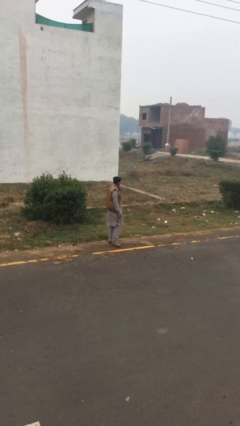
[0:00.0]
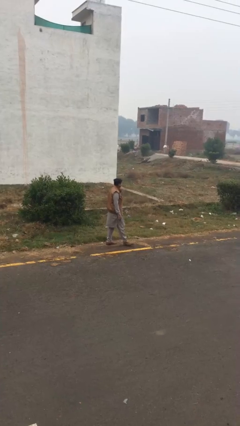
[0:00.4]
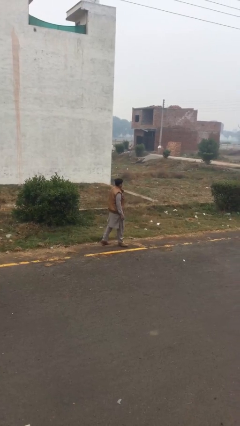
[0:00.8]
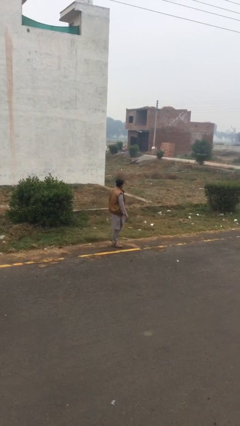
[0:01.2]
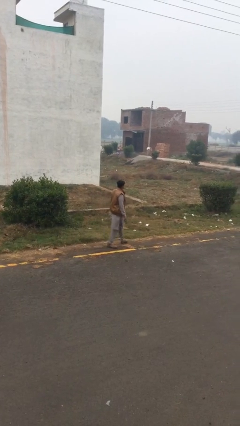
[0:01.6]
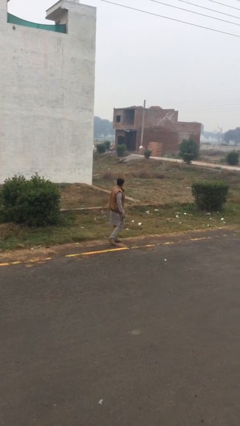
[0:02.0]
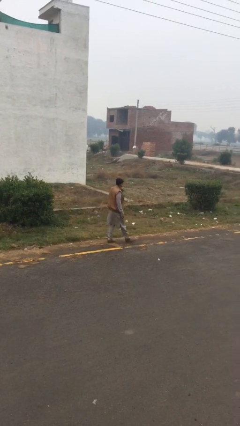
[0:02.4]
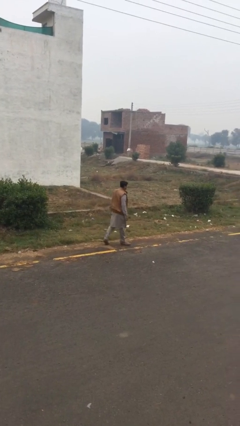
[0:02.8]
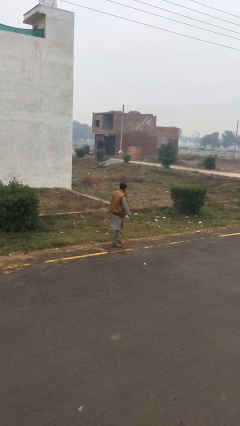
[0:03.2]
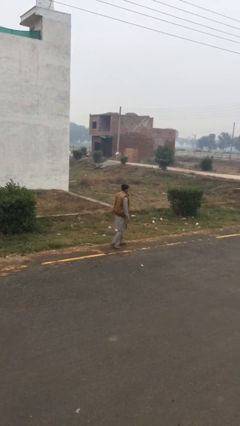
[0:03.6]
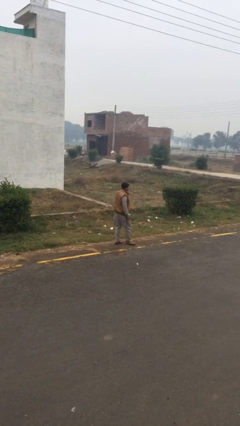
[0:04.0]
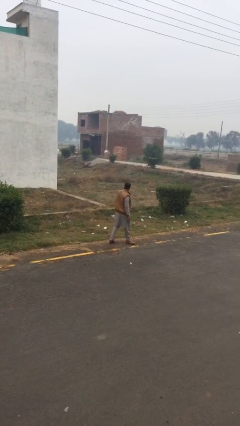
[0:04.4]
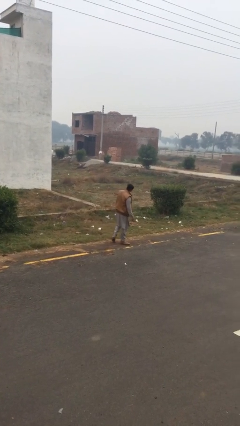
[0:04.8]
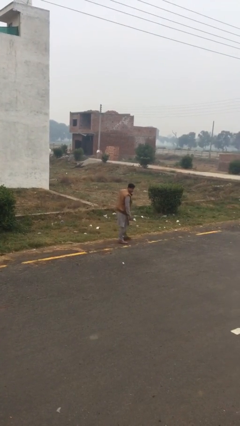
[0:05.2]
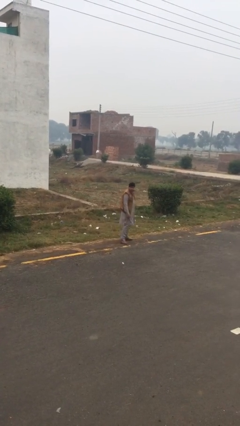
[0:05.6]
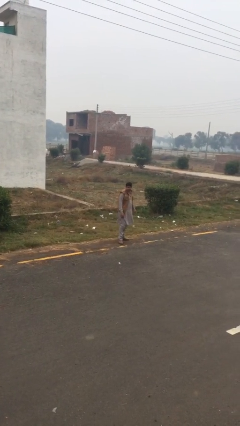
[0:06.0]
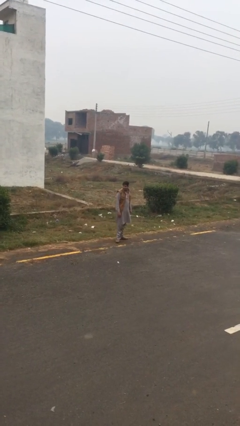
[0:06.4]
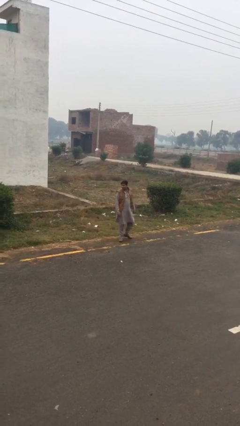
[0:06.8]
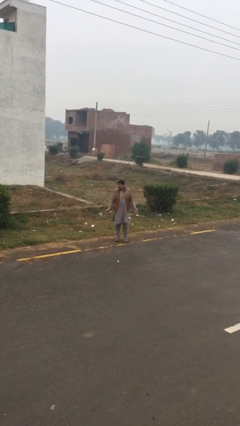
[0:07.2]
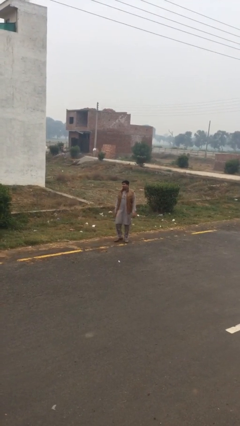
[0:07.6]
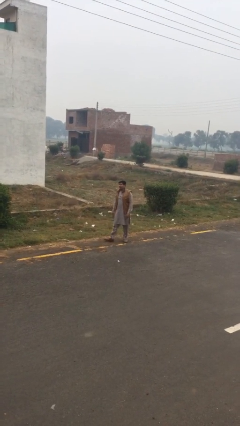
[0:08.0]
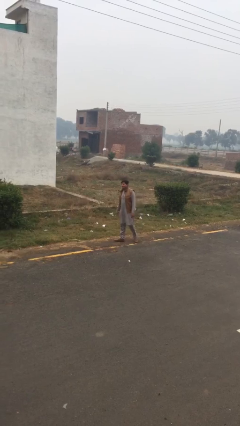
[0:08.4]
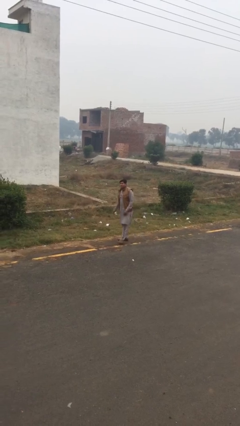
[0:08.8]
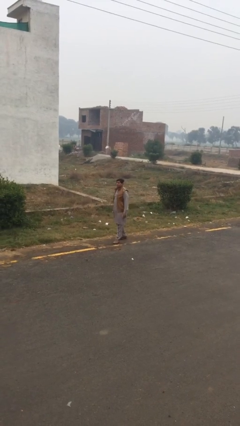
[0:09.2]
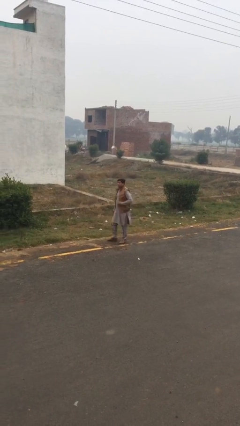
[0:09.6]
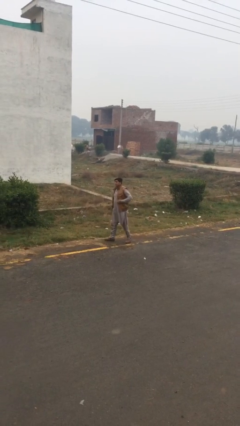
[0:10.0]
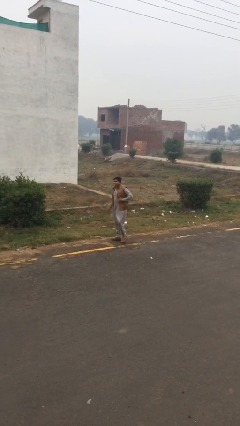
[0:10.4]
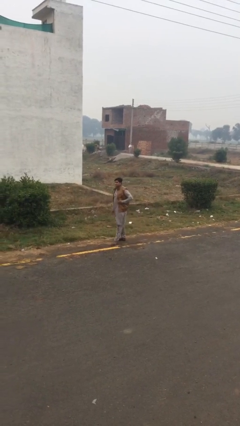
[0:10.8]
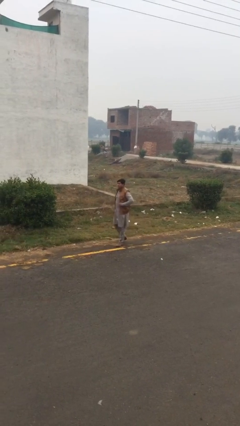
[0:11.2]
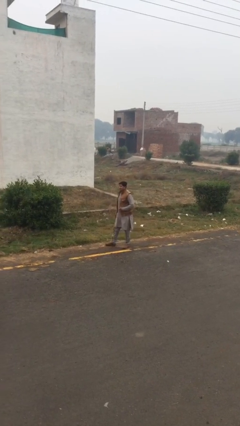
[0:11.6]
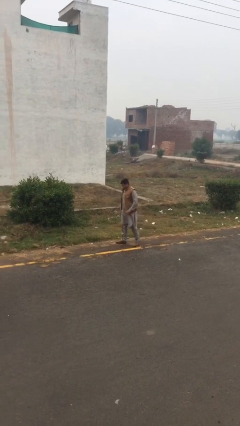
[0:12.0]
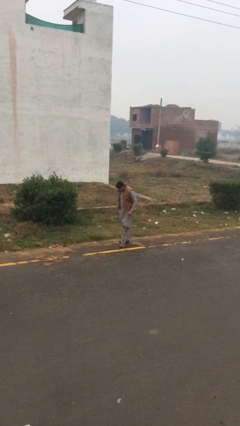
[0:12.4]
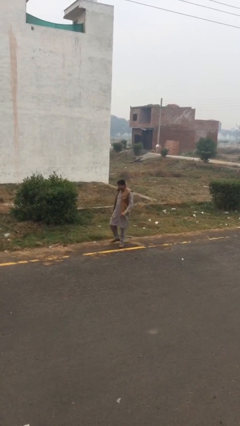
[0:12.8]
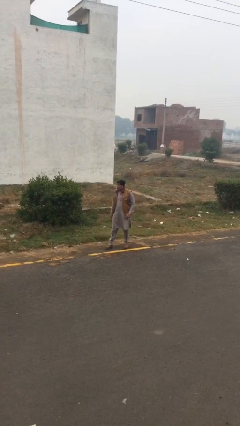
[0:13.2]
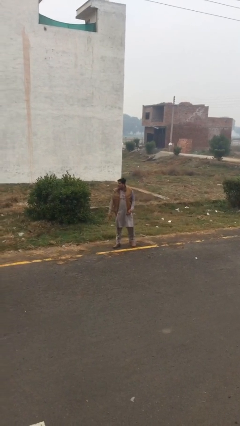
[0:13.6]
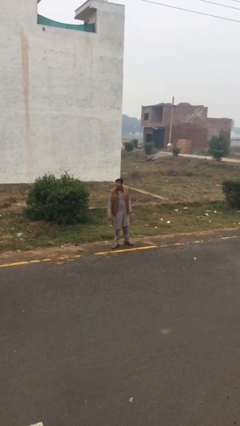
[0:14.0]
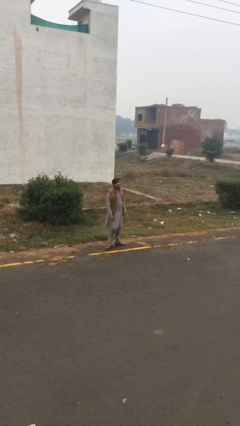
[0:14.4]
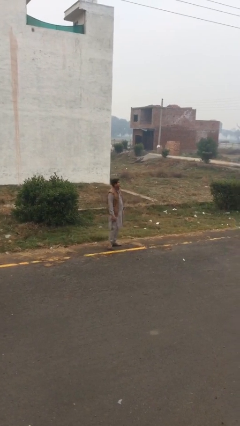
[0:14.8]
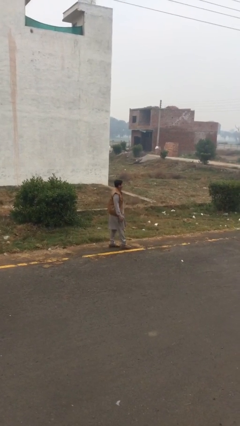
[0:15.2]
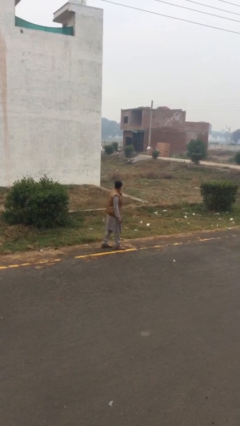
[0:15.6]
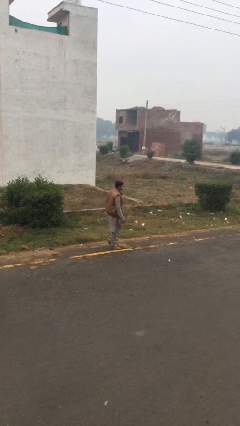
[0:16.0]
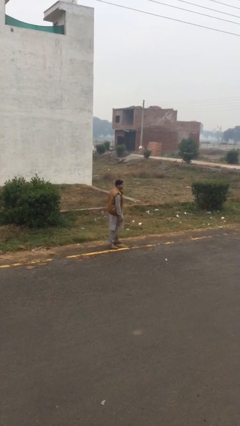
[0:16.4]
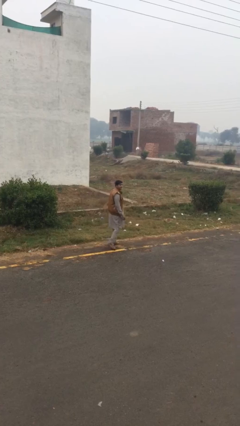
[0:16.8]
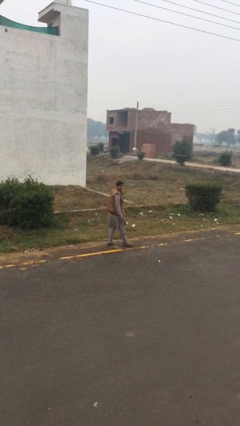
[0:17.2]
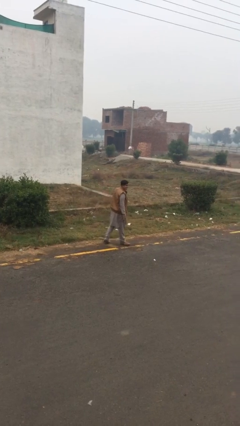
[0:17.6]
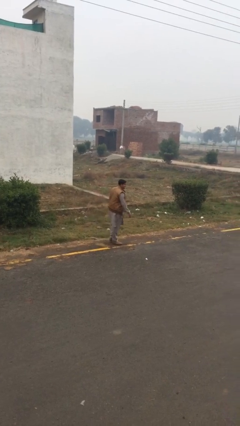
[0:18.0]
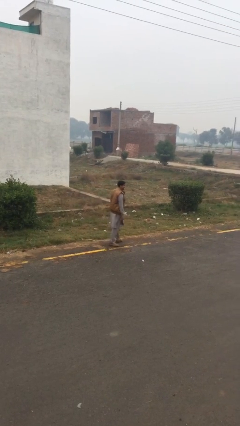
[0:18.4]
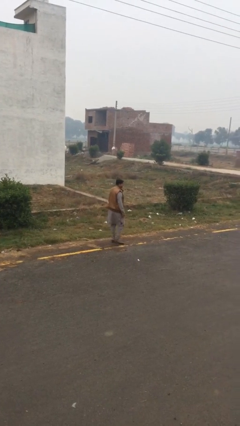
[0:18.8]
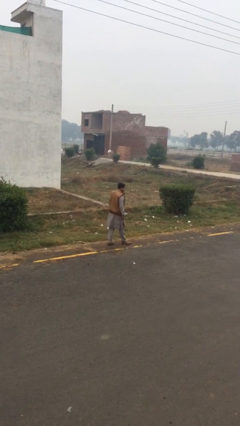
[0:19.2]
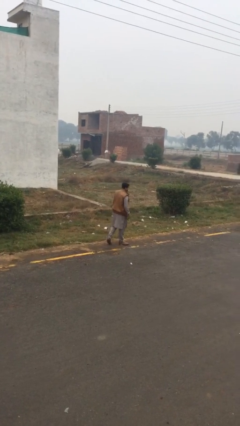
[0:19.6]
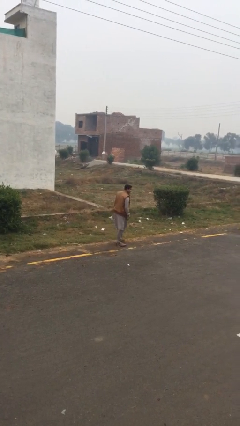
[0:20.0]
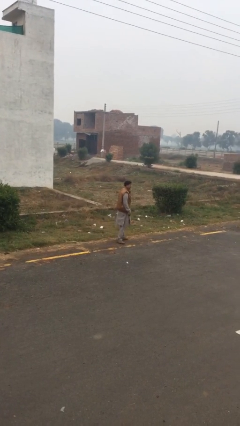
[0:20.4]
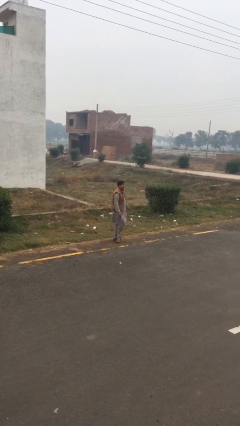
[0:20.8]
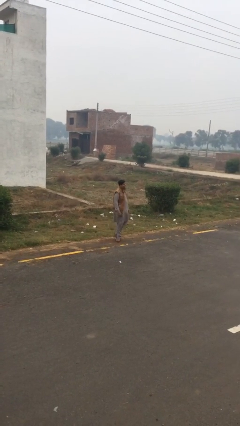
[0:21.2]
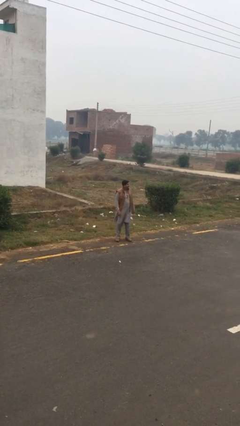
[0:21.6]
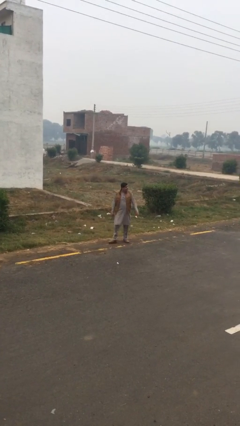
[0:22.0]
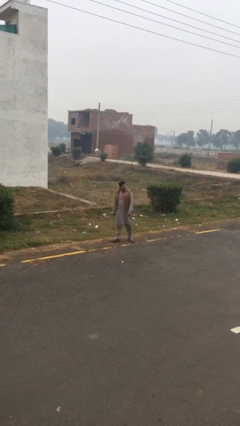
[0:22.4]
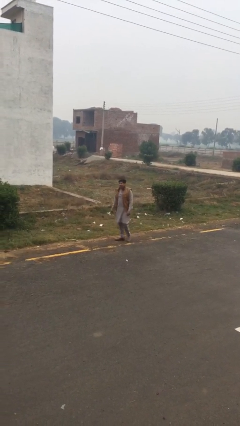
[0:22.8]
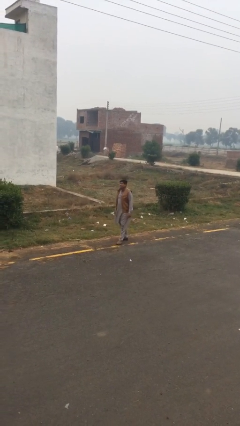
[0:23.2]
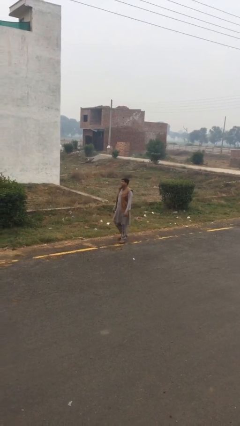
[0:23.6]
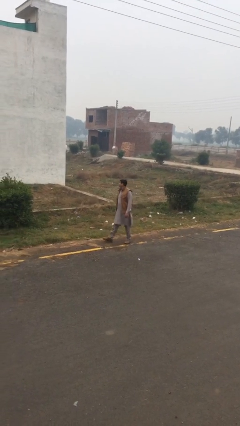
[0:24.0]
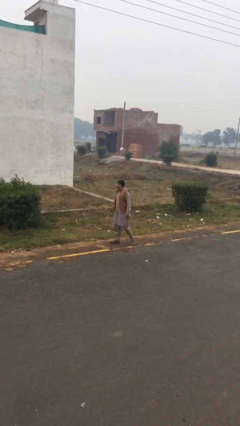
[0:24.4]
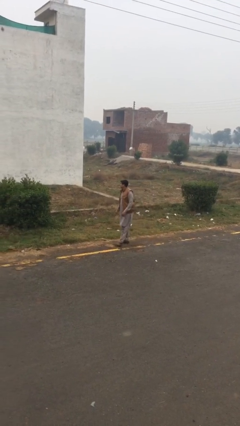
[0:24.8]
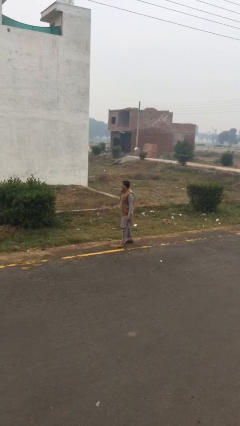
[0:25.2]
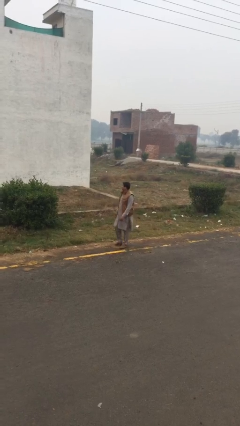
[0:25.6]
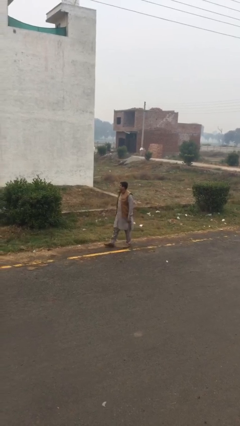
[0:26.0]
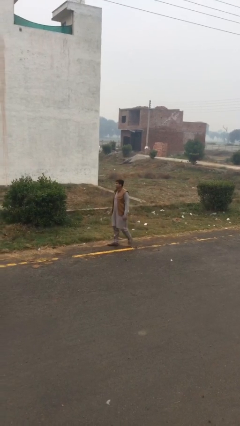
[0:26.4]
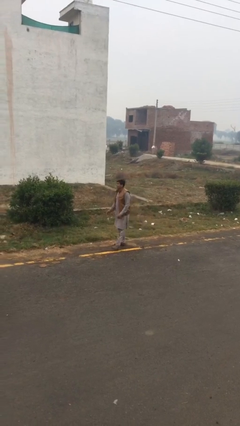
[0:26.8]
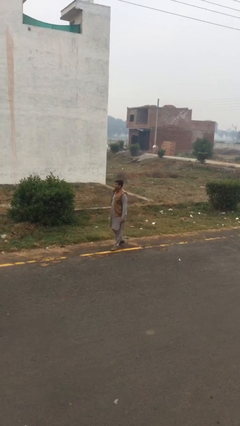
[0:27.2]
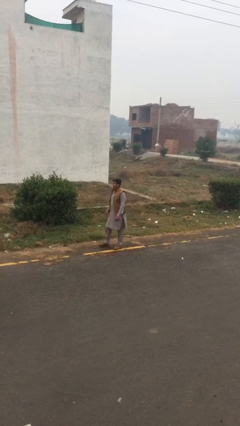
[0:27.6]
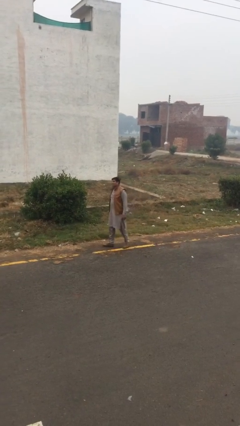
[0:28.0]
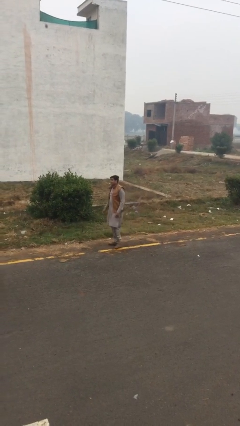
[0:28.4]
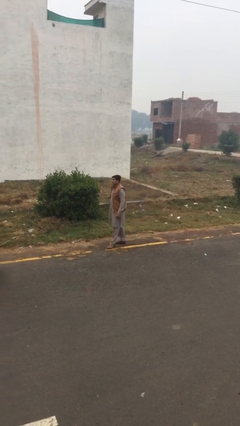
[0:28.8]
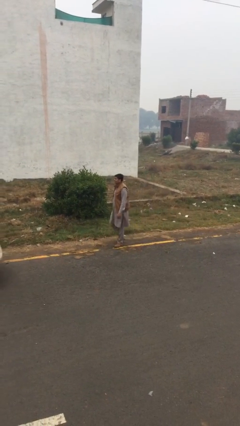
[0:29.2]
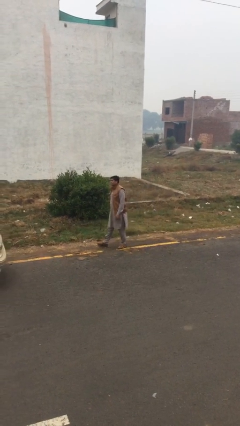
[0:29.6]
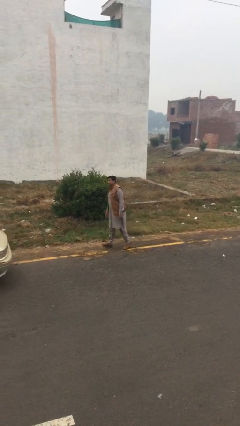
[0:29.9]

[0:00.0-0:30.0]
person walks

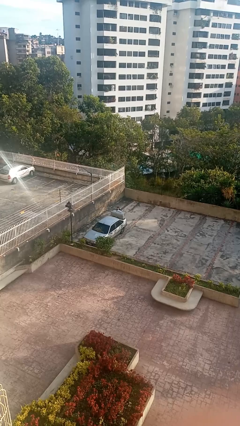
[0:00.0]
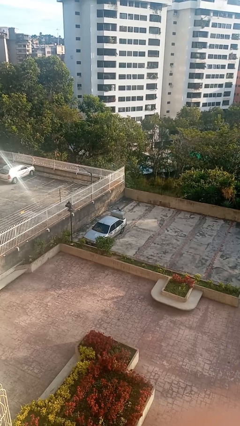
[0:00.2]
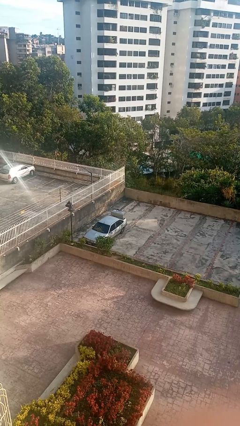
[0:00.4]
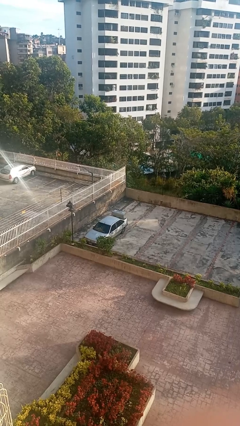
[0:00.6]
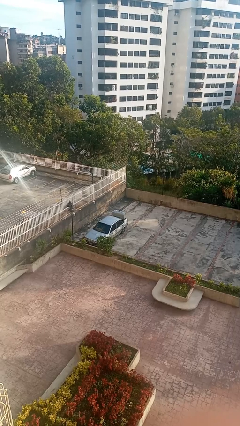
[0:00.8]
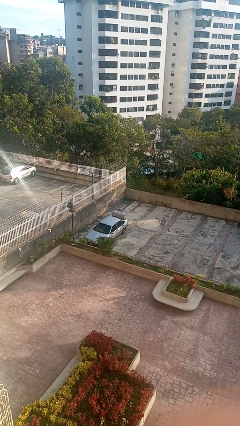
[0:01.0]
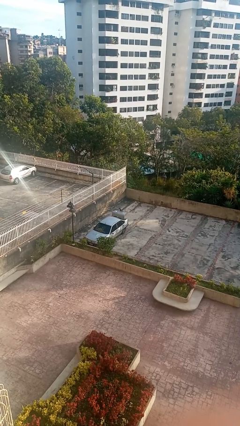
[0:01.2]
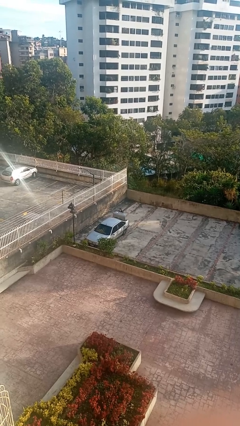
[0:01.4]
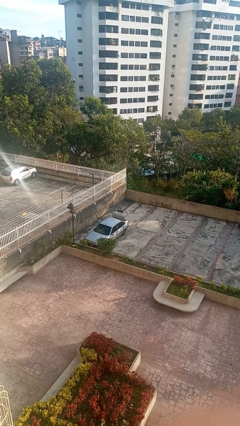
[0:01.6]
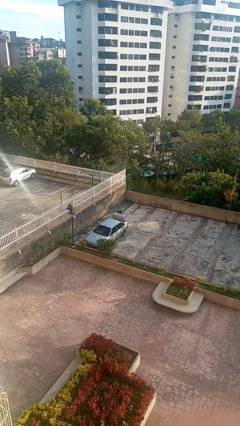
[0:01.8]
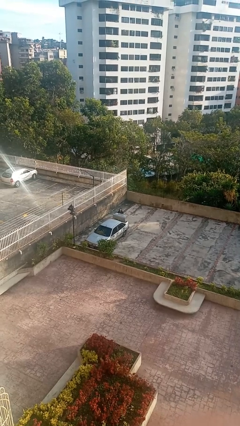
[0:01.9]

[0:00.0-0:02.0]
person loads car

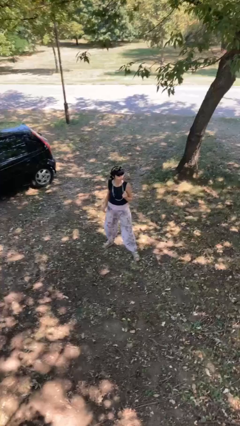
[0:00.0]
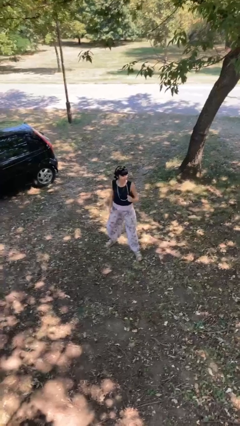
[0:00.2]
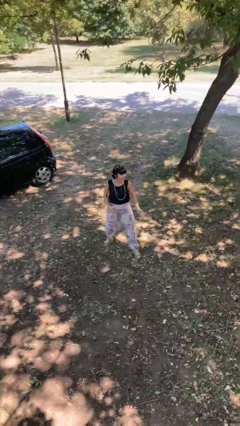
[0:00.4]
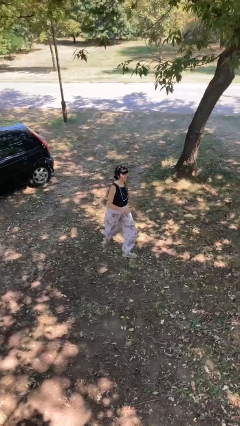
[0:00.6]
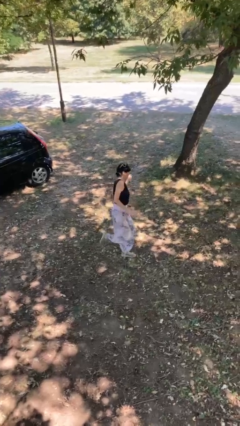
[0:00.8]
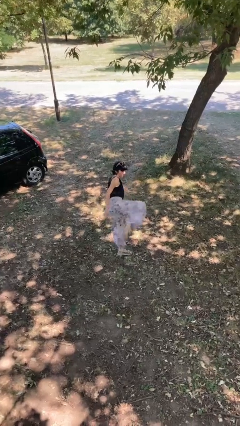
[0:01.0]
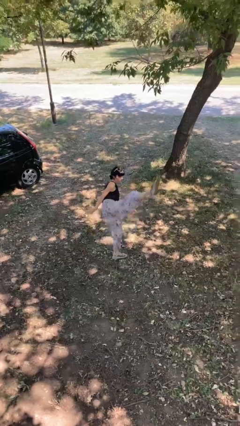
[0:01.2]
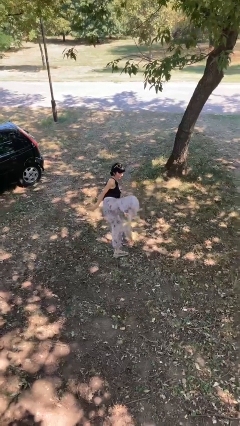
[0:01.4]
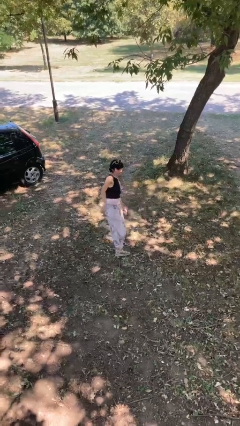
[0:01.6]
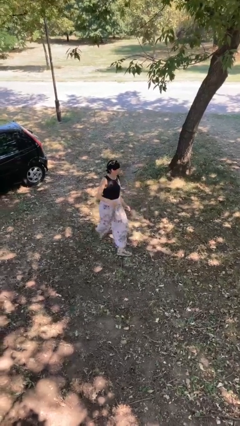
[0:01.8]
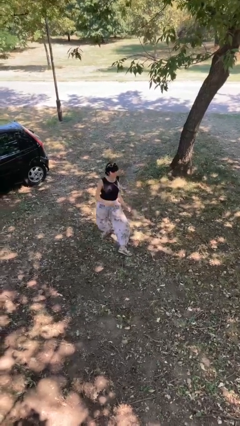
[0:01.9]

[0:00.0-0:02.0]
person karate kicks
